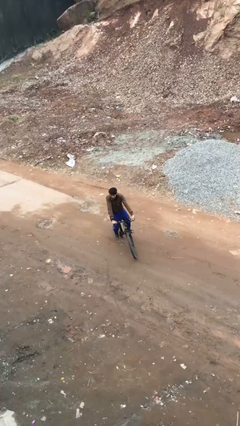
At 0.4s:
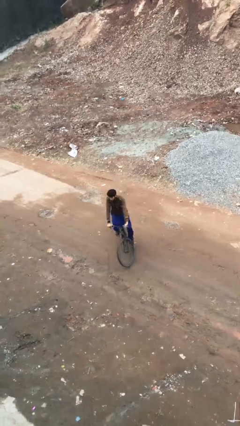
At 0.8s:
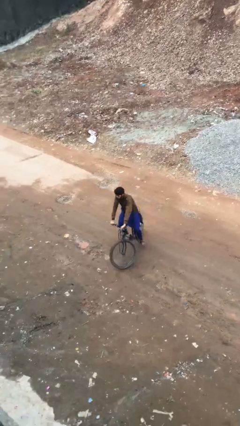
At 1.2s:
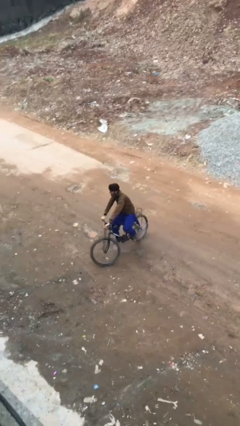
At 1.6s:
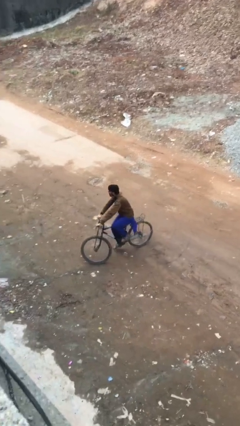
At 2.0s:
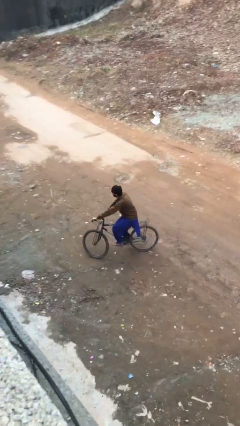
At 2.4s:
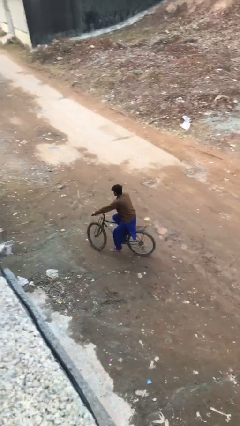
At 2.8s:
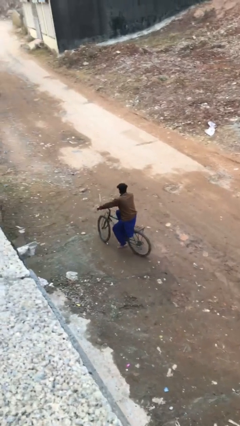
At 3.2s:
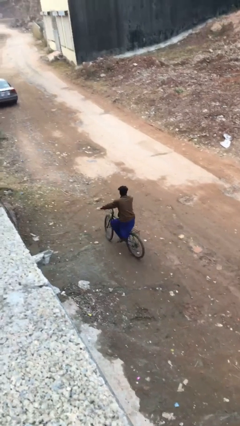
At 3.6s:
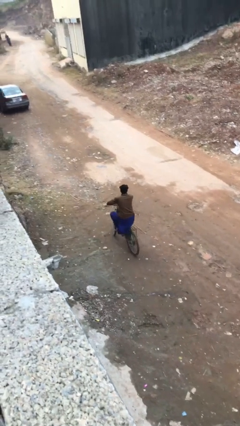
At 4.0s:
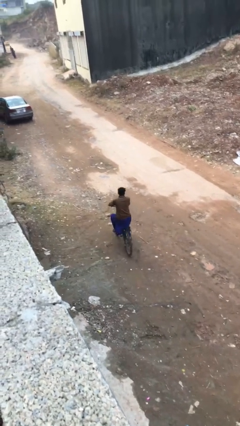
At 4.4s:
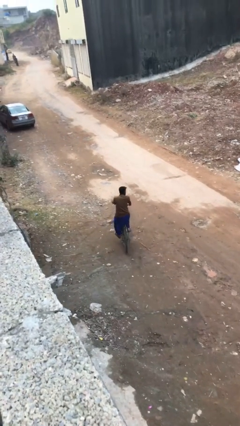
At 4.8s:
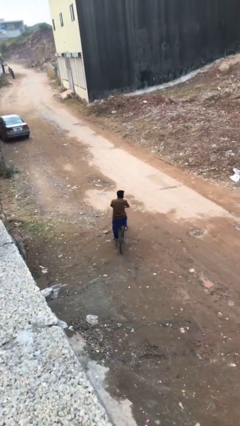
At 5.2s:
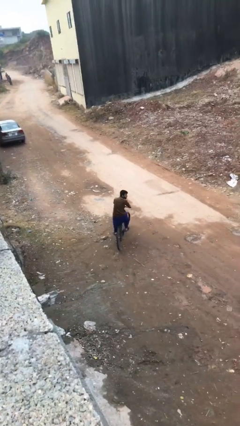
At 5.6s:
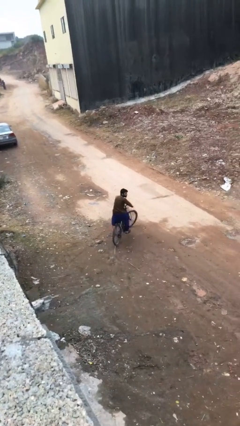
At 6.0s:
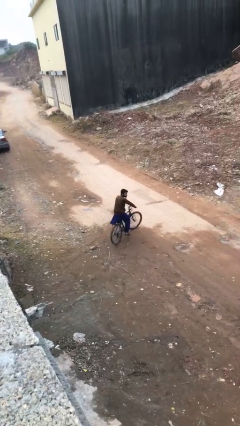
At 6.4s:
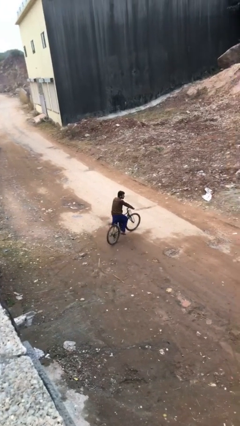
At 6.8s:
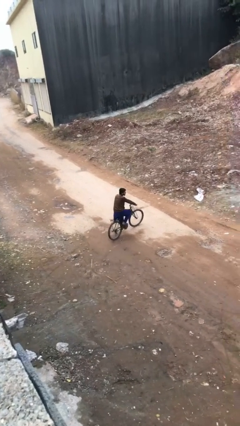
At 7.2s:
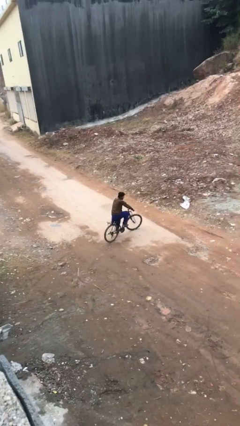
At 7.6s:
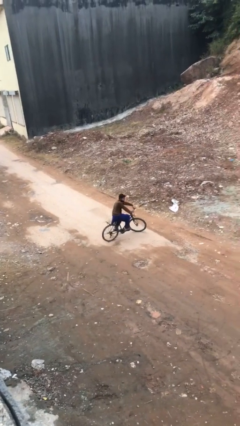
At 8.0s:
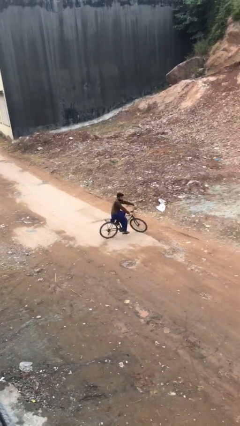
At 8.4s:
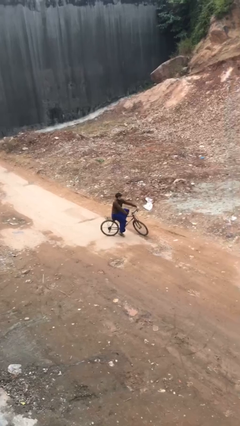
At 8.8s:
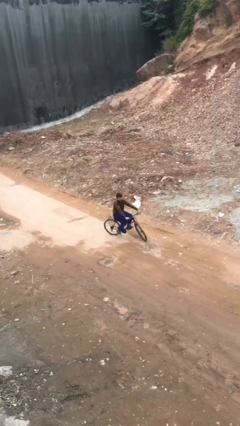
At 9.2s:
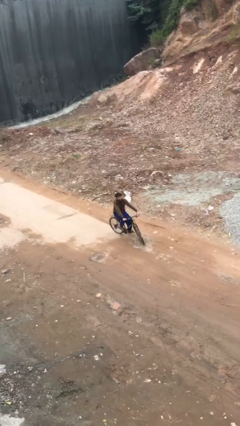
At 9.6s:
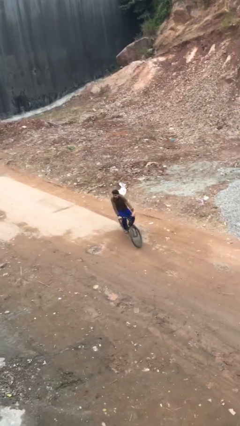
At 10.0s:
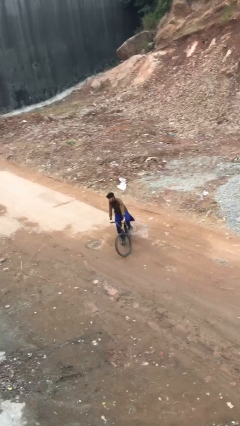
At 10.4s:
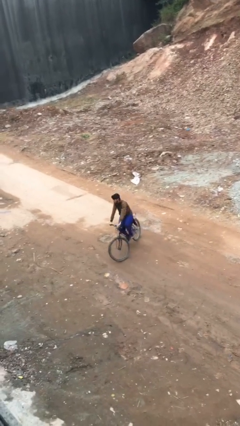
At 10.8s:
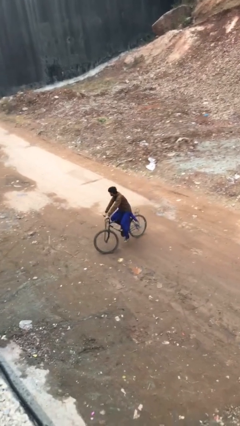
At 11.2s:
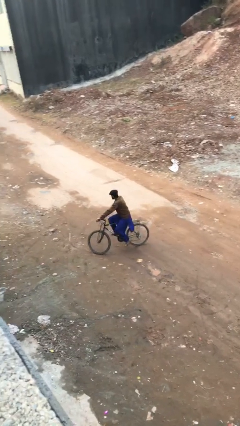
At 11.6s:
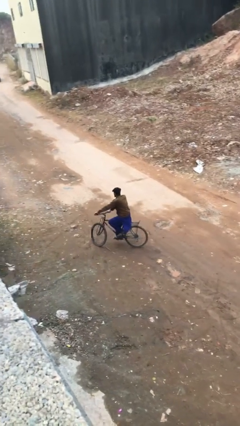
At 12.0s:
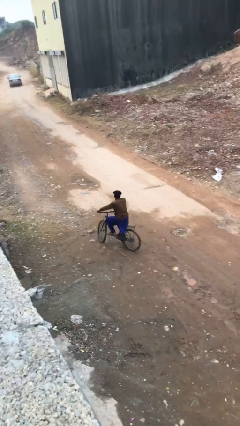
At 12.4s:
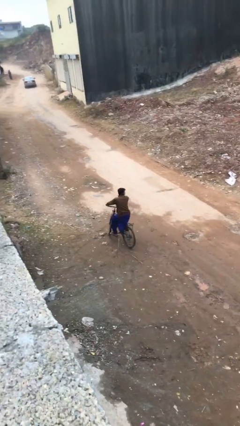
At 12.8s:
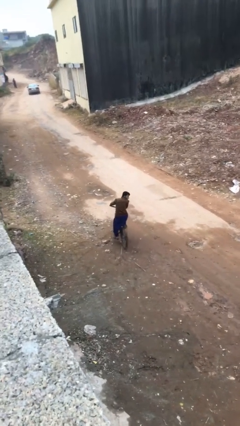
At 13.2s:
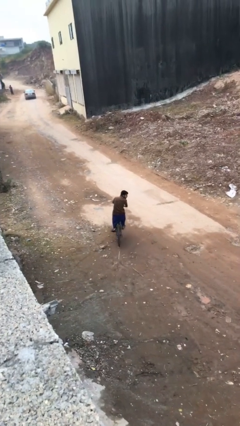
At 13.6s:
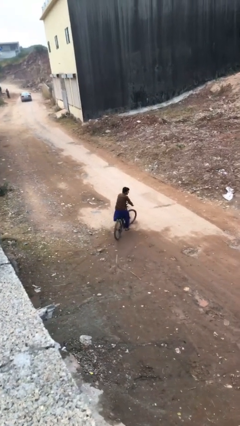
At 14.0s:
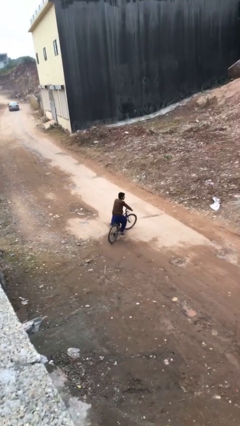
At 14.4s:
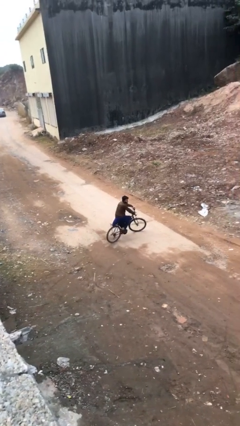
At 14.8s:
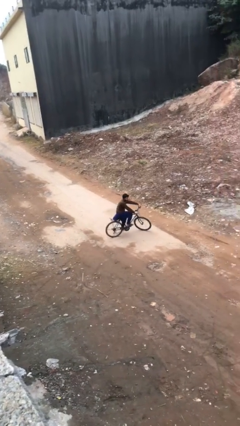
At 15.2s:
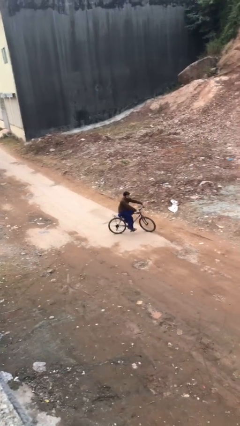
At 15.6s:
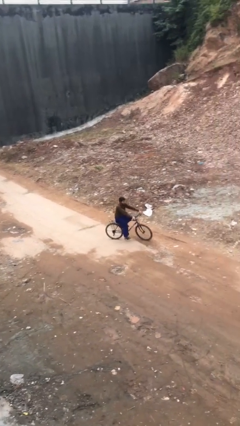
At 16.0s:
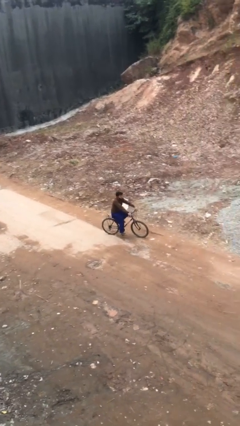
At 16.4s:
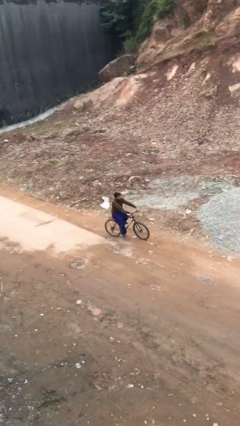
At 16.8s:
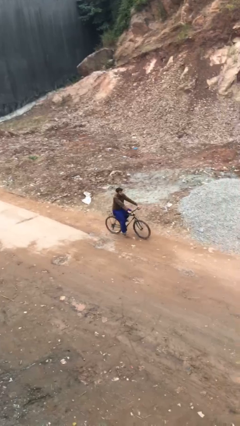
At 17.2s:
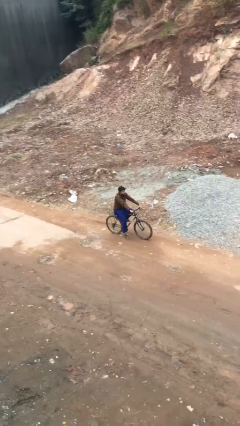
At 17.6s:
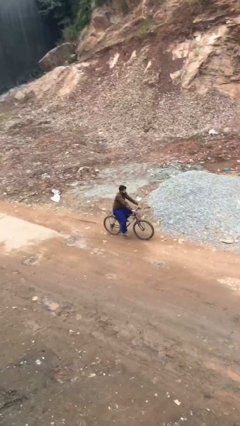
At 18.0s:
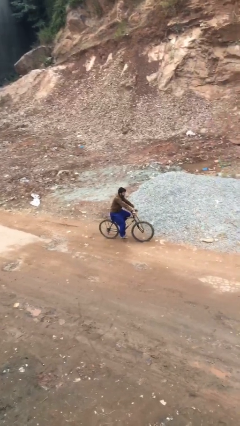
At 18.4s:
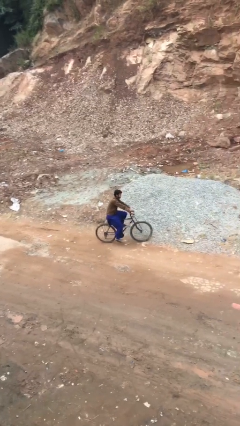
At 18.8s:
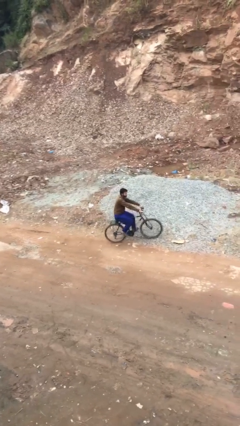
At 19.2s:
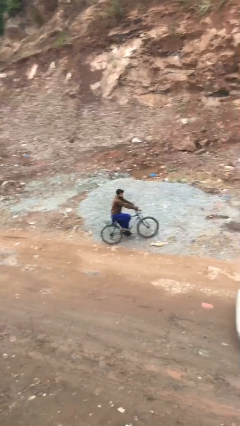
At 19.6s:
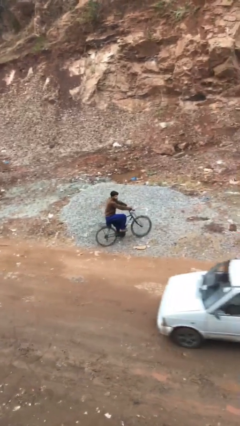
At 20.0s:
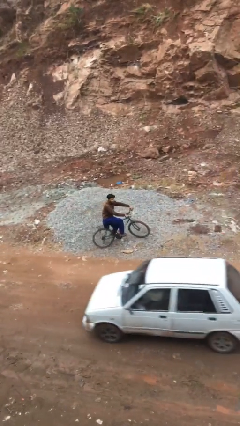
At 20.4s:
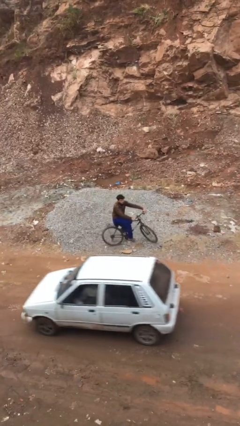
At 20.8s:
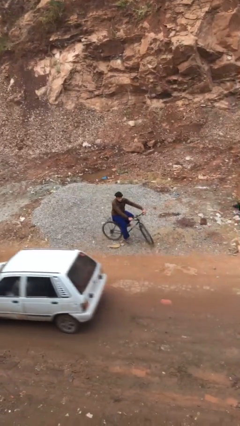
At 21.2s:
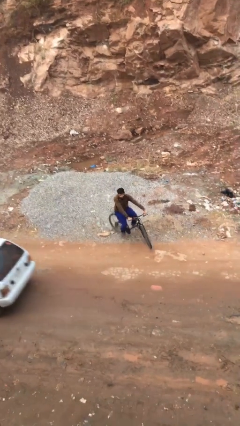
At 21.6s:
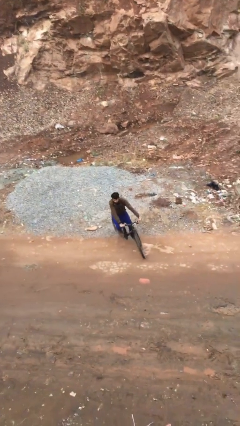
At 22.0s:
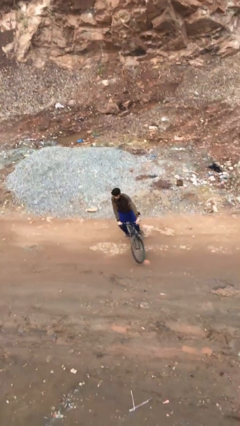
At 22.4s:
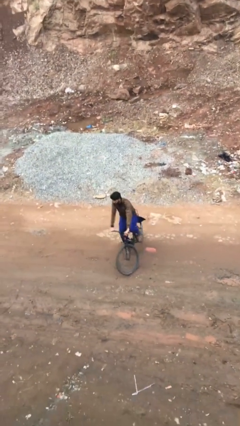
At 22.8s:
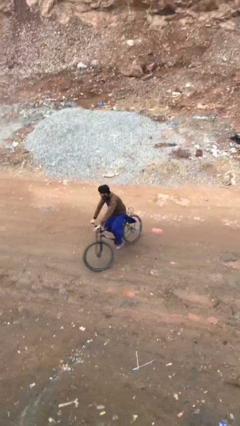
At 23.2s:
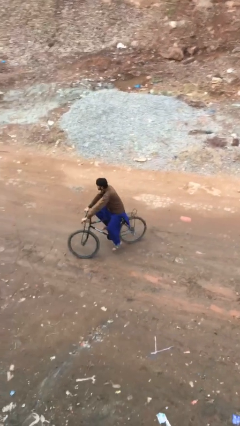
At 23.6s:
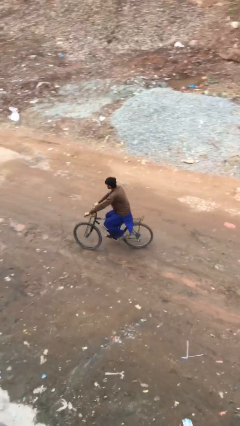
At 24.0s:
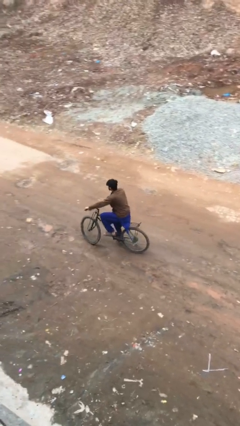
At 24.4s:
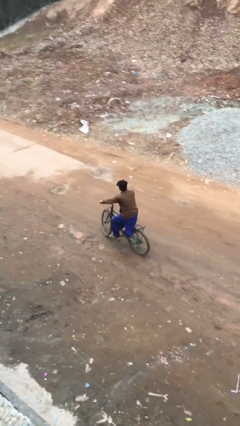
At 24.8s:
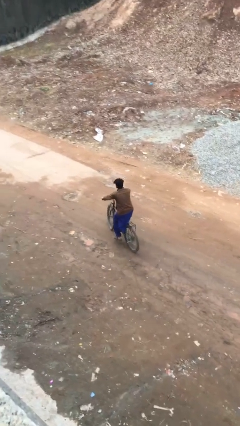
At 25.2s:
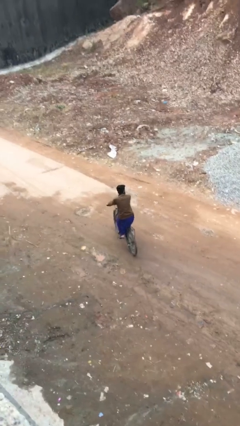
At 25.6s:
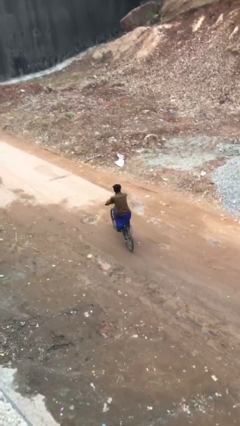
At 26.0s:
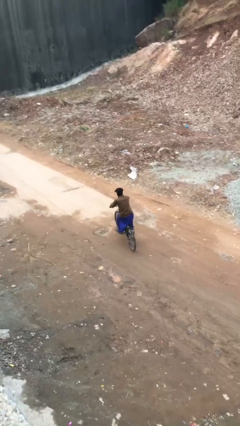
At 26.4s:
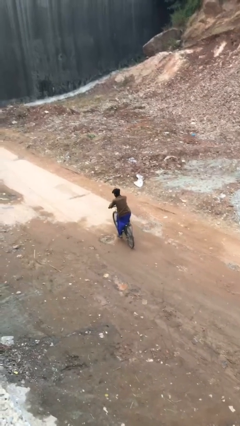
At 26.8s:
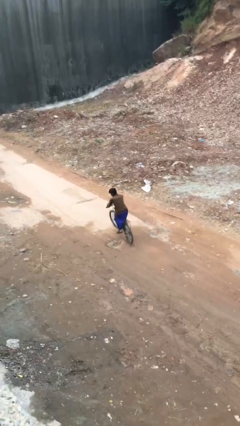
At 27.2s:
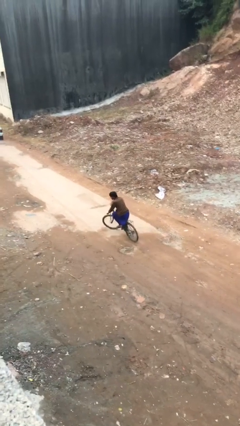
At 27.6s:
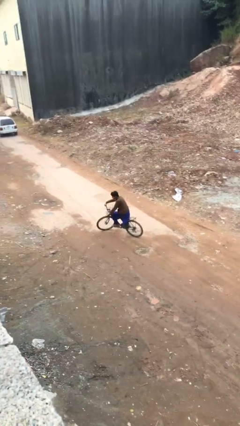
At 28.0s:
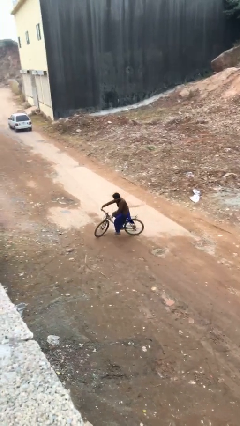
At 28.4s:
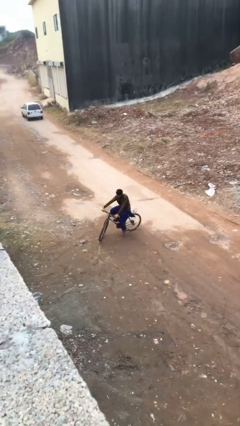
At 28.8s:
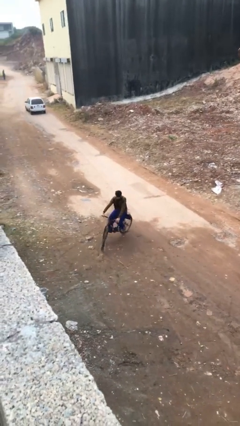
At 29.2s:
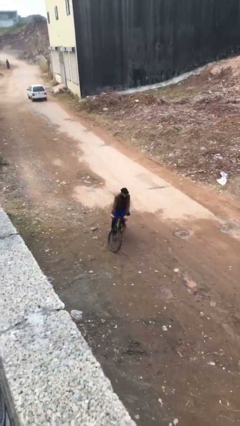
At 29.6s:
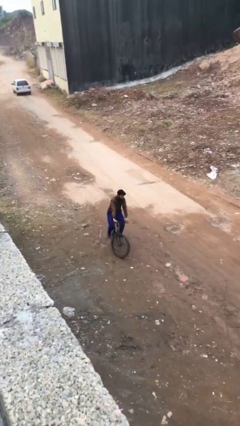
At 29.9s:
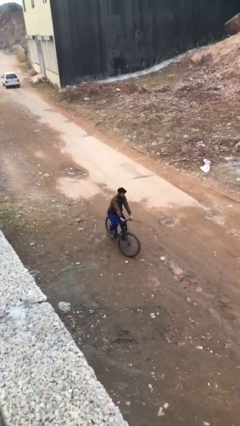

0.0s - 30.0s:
person rides bicycle

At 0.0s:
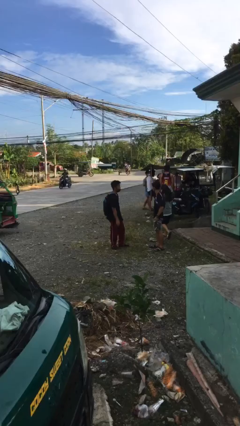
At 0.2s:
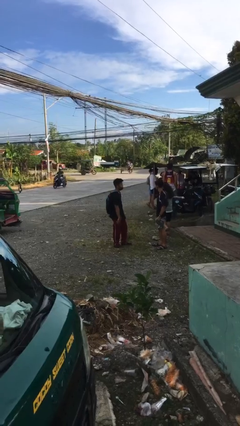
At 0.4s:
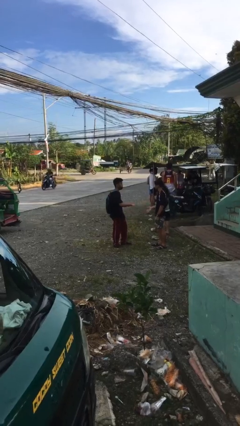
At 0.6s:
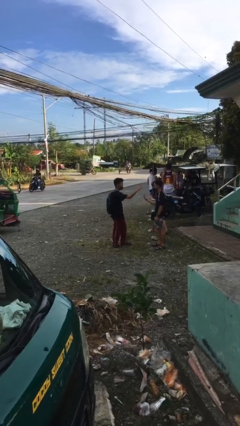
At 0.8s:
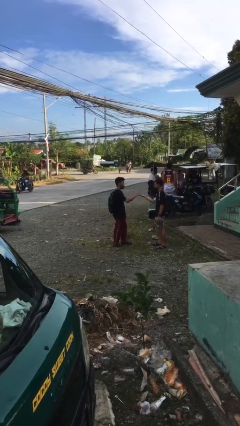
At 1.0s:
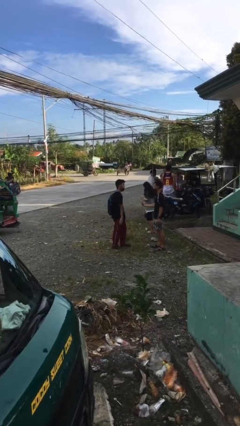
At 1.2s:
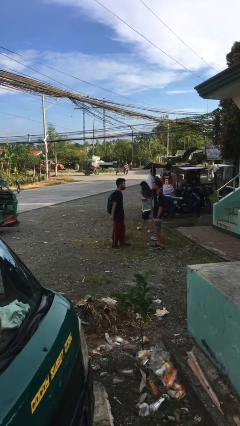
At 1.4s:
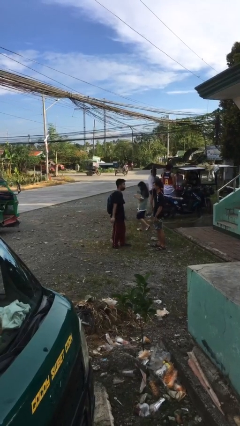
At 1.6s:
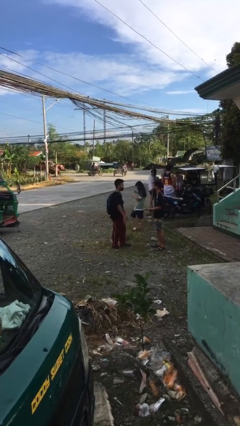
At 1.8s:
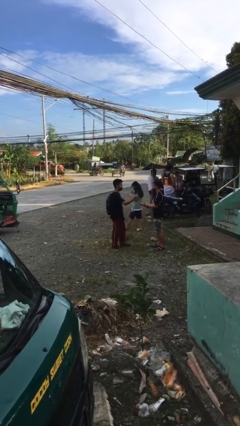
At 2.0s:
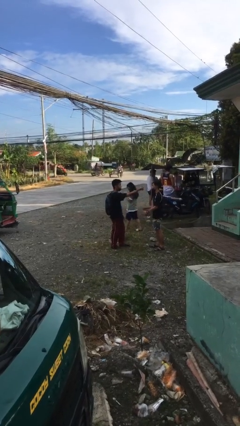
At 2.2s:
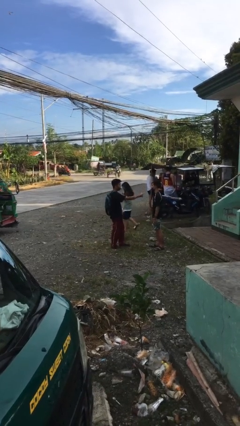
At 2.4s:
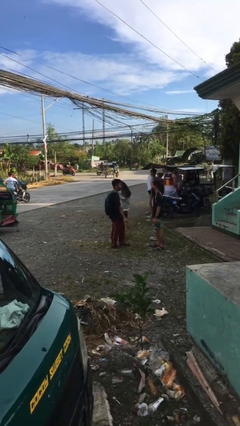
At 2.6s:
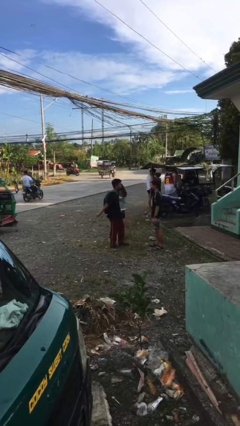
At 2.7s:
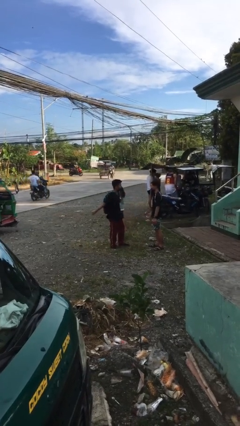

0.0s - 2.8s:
person talks to person
